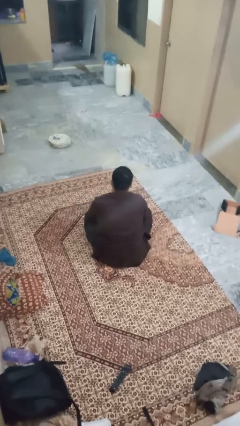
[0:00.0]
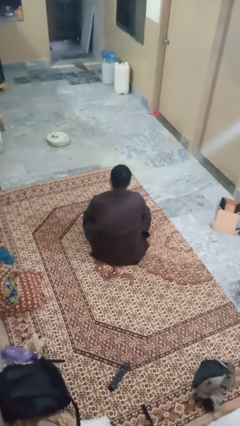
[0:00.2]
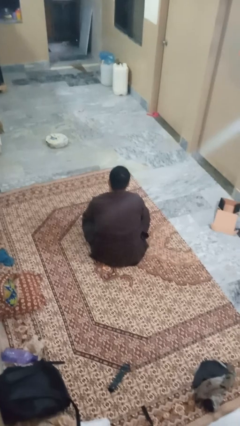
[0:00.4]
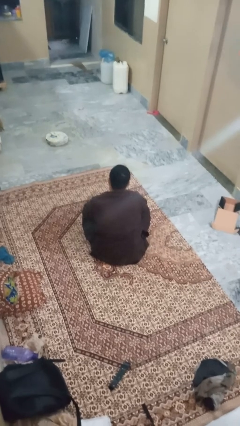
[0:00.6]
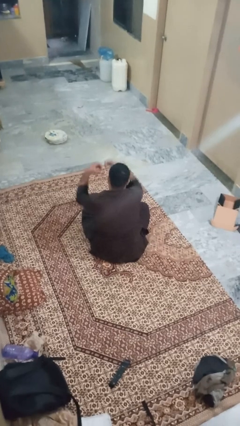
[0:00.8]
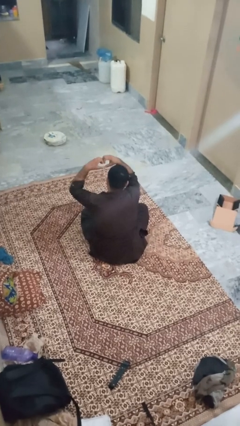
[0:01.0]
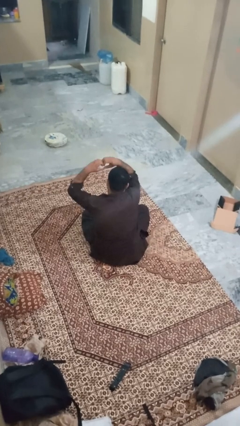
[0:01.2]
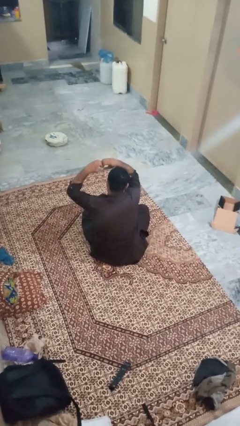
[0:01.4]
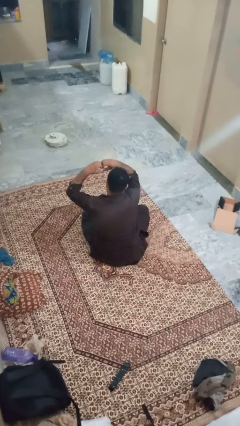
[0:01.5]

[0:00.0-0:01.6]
person gestures heart

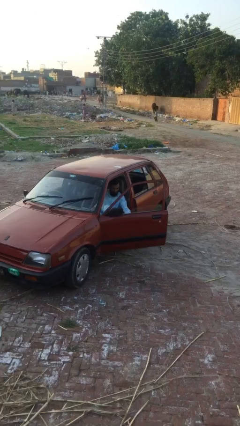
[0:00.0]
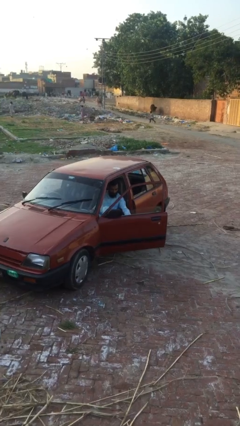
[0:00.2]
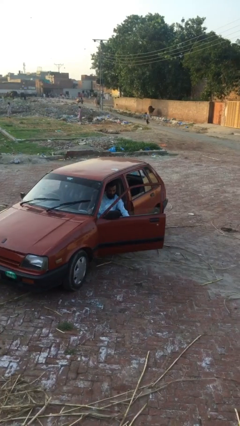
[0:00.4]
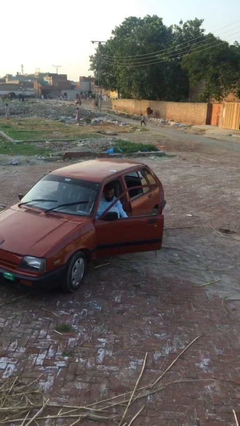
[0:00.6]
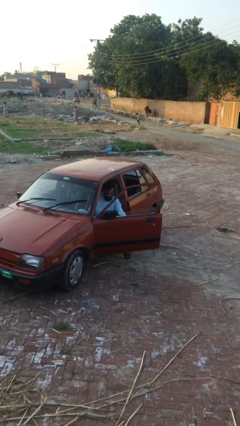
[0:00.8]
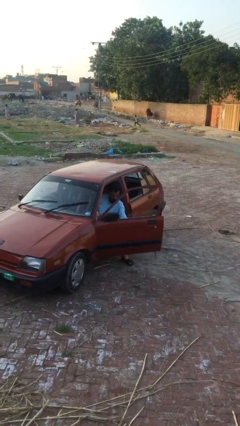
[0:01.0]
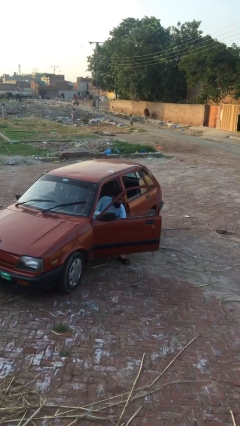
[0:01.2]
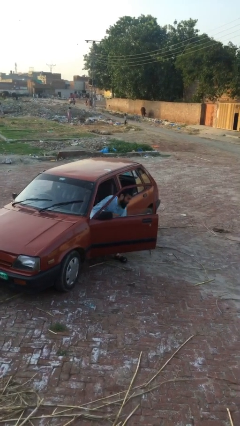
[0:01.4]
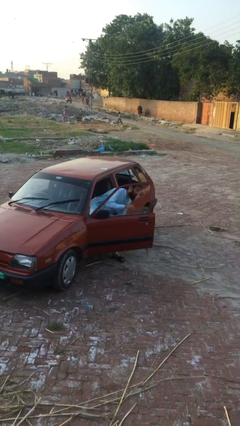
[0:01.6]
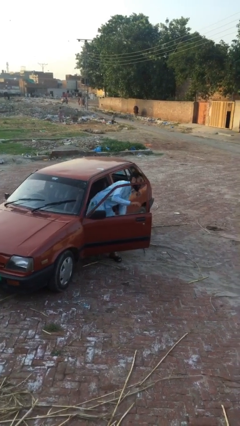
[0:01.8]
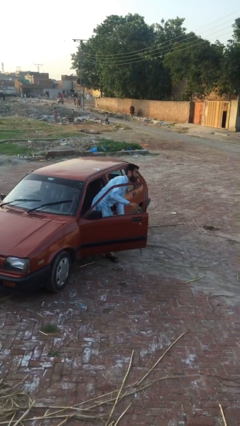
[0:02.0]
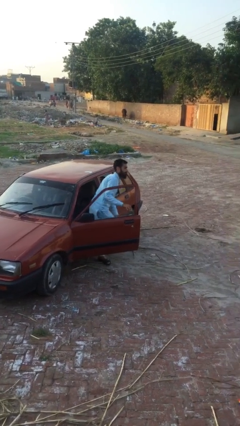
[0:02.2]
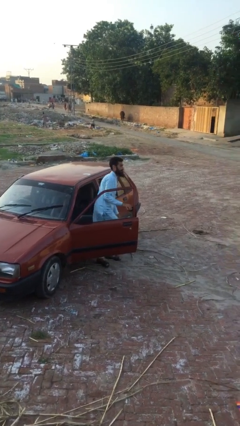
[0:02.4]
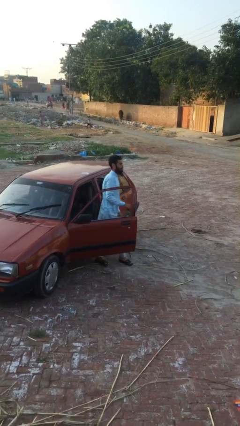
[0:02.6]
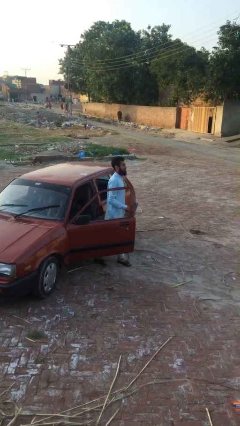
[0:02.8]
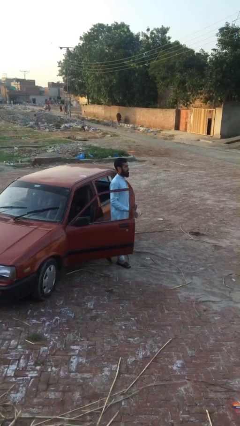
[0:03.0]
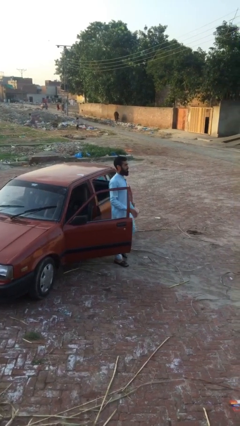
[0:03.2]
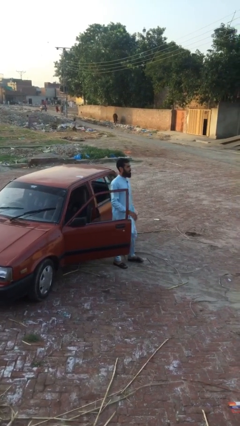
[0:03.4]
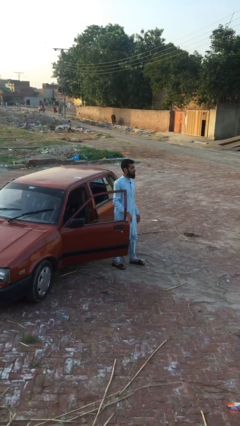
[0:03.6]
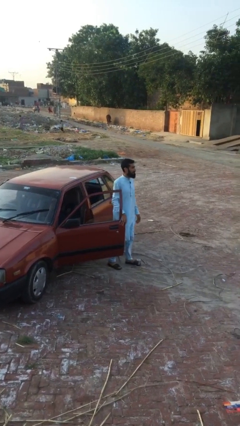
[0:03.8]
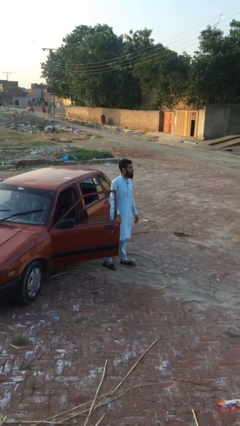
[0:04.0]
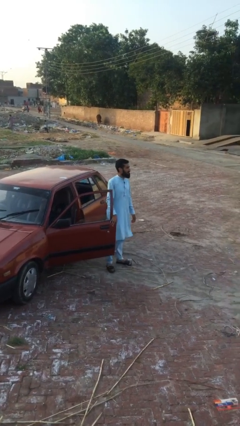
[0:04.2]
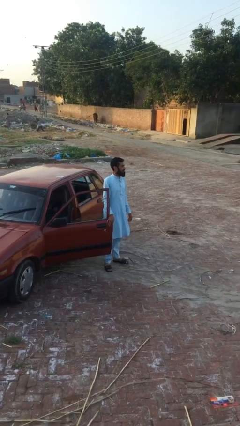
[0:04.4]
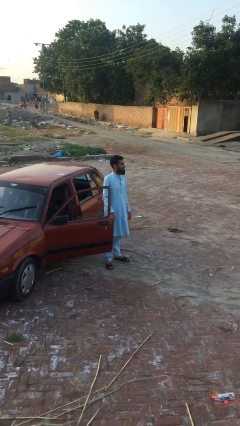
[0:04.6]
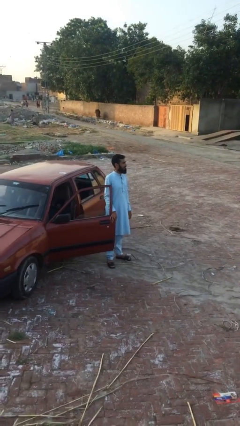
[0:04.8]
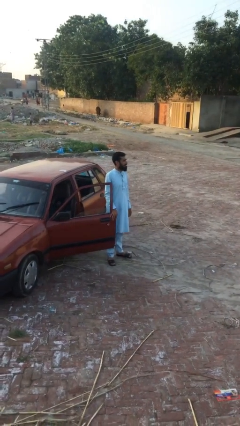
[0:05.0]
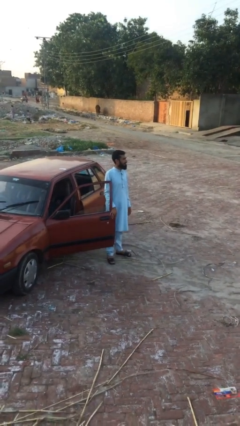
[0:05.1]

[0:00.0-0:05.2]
person exits car

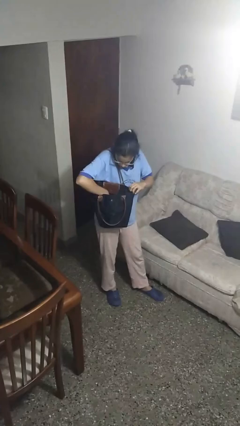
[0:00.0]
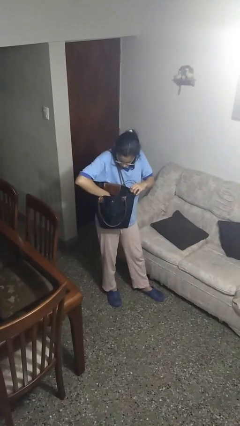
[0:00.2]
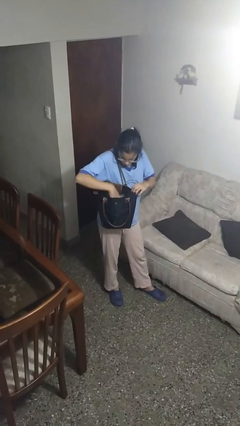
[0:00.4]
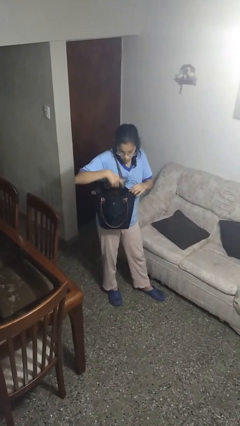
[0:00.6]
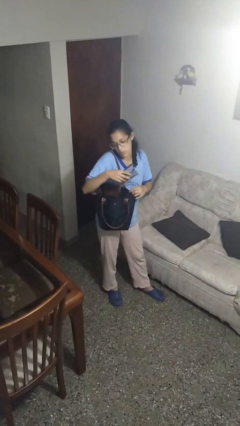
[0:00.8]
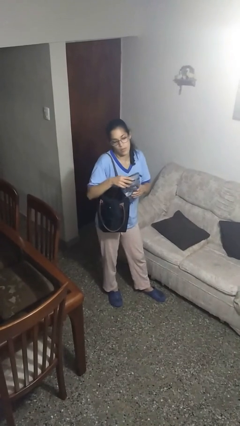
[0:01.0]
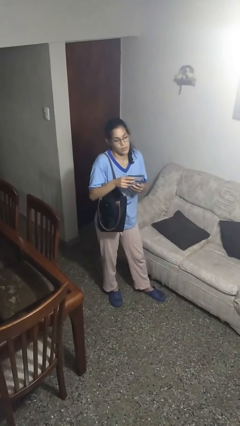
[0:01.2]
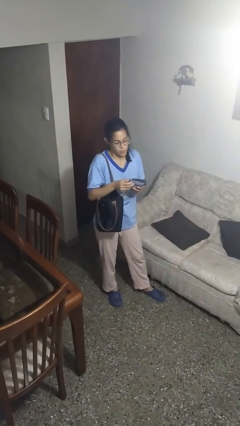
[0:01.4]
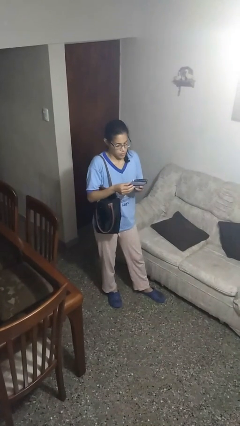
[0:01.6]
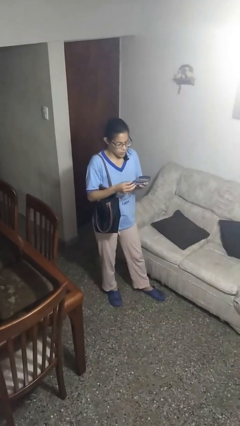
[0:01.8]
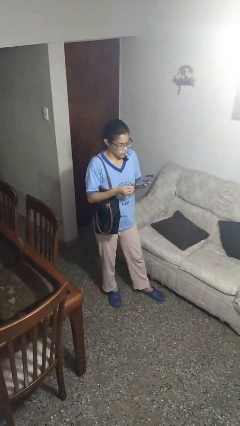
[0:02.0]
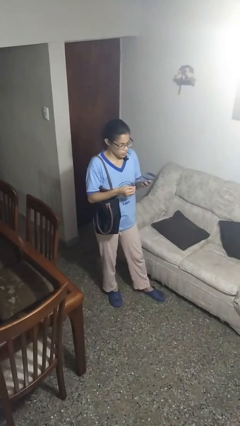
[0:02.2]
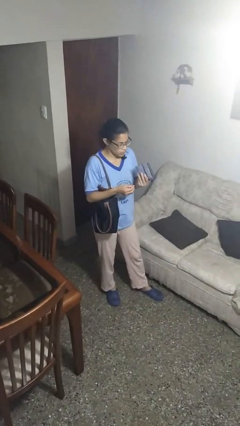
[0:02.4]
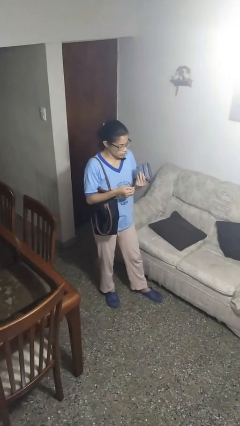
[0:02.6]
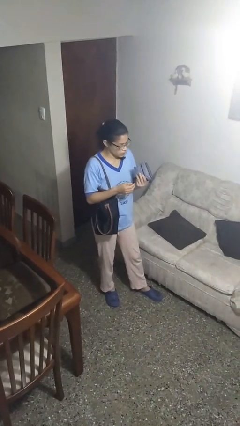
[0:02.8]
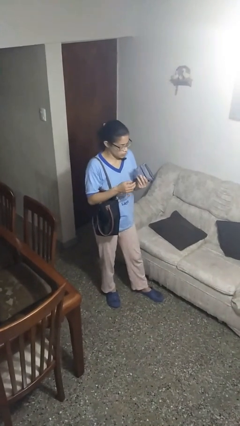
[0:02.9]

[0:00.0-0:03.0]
person takes object from purse

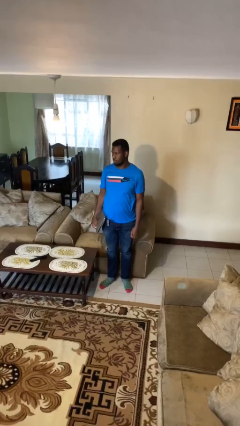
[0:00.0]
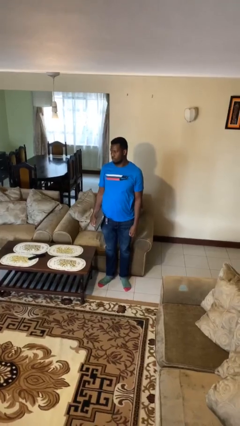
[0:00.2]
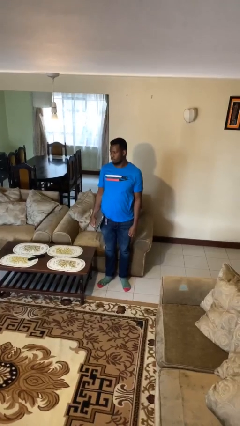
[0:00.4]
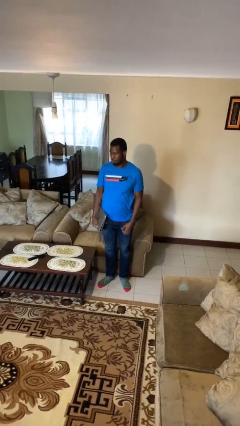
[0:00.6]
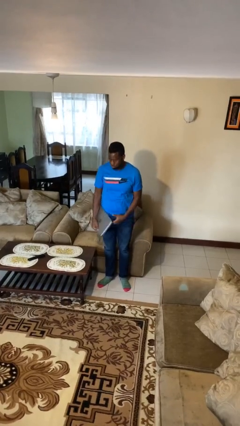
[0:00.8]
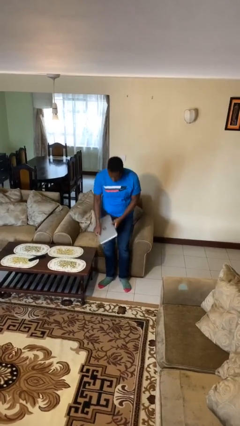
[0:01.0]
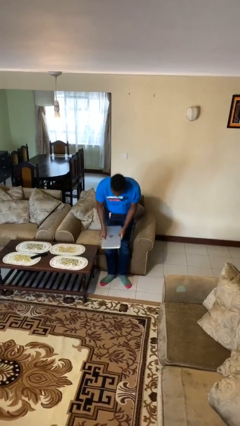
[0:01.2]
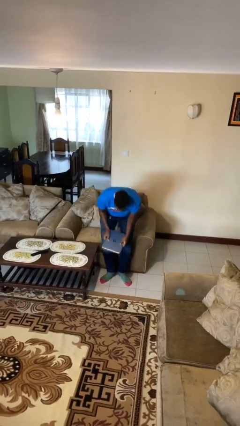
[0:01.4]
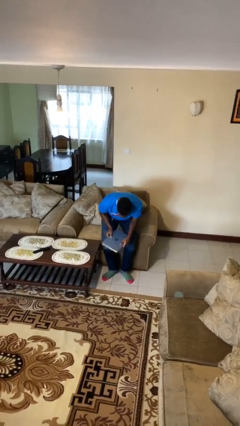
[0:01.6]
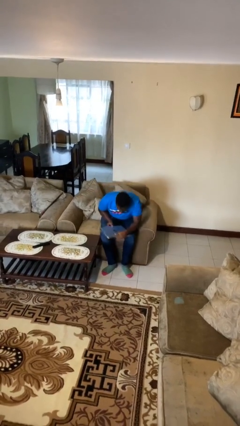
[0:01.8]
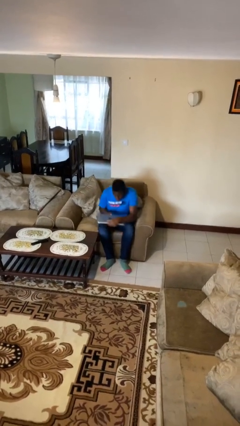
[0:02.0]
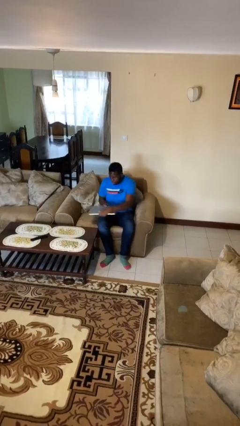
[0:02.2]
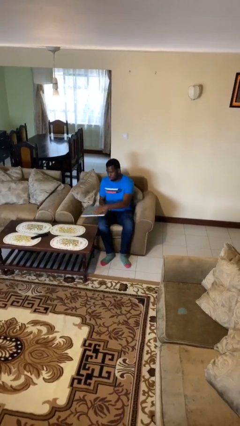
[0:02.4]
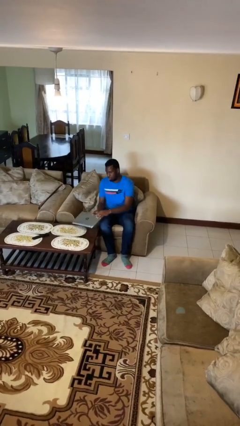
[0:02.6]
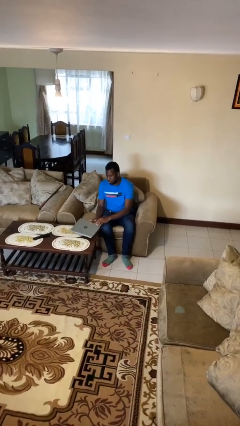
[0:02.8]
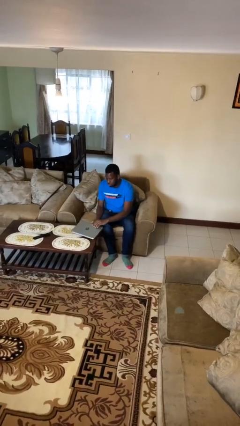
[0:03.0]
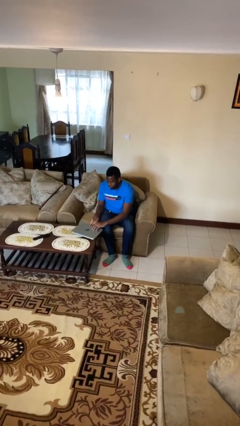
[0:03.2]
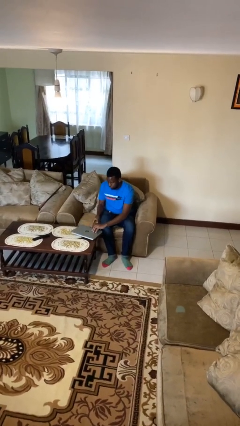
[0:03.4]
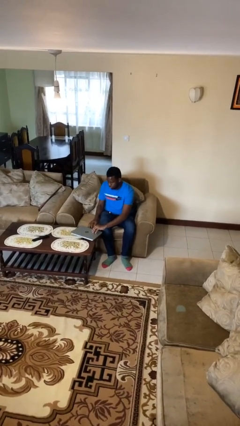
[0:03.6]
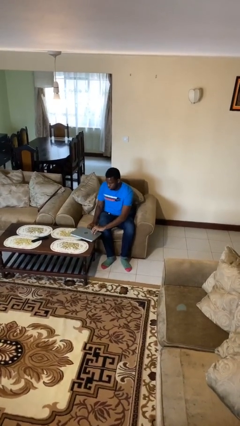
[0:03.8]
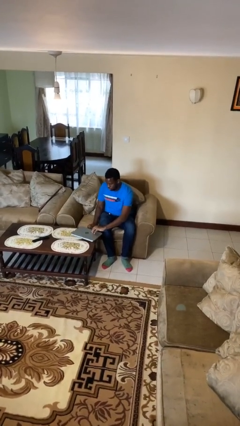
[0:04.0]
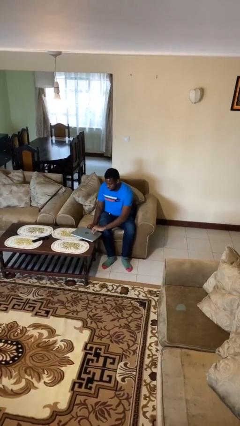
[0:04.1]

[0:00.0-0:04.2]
person sits down

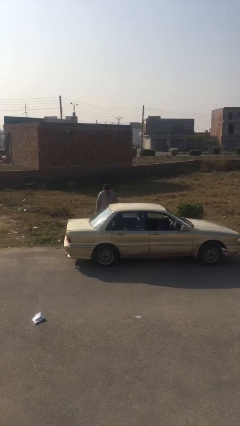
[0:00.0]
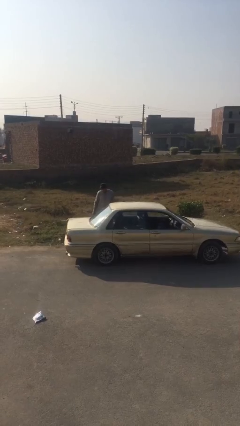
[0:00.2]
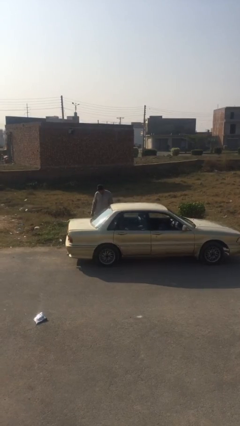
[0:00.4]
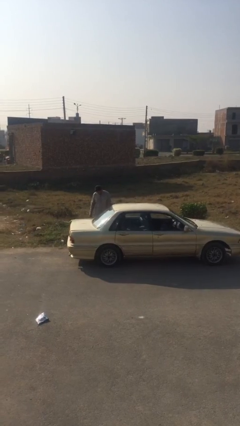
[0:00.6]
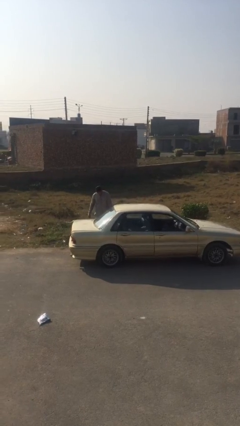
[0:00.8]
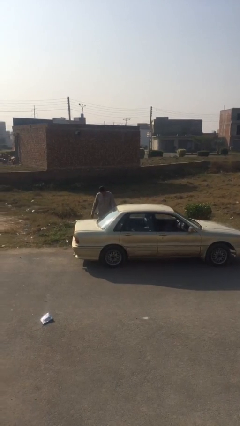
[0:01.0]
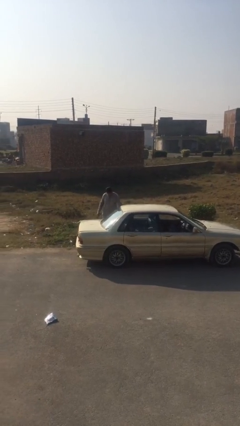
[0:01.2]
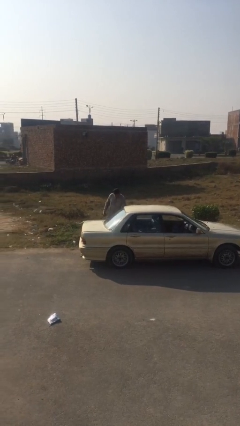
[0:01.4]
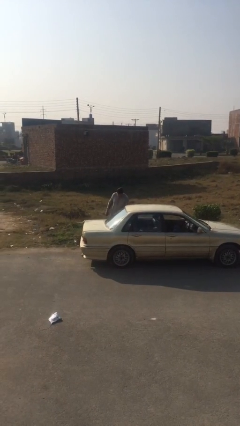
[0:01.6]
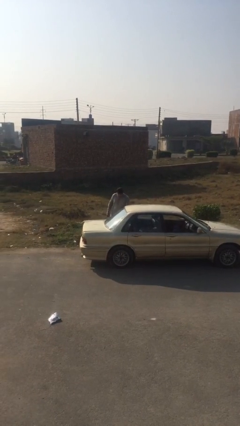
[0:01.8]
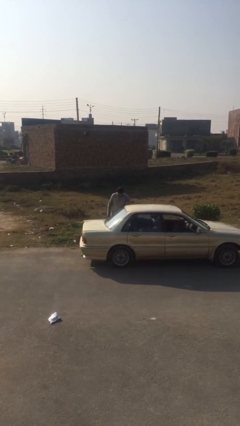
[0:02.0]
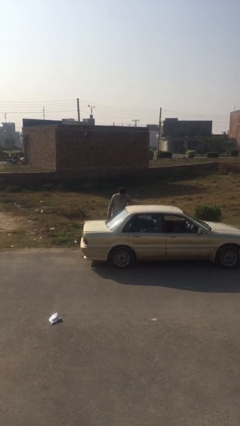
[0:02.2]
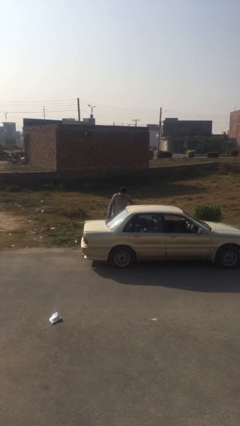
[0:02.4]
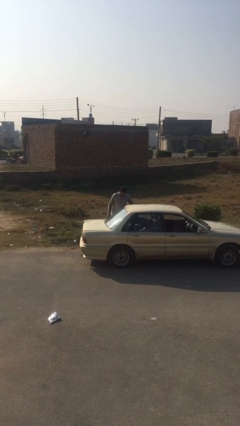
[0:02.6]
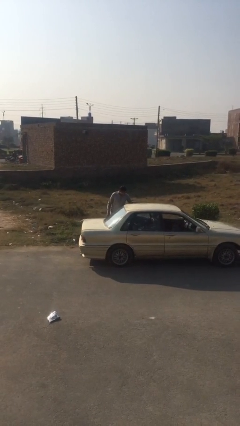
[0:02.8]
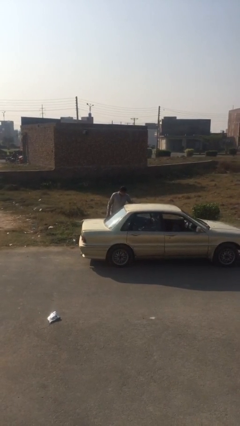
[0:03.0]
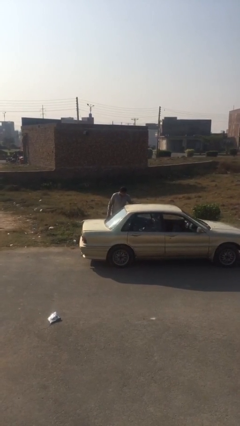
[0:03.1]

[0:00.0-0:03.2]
person opens car door

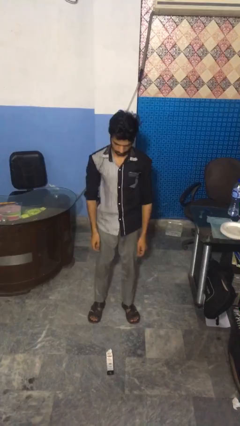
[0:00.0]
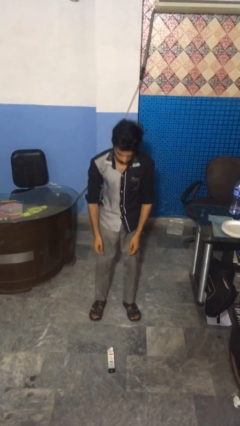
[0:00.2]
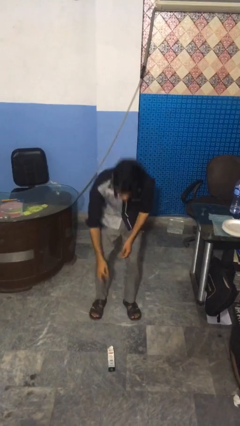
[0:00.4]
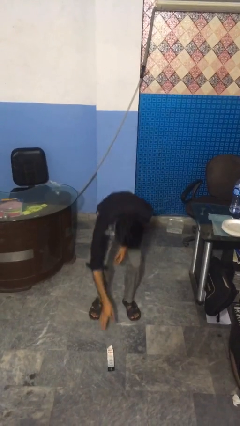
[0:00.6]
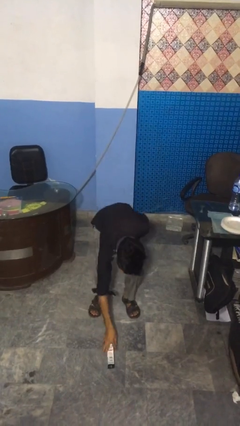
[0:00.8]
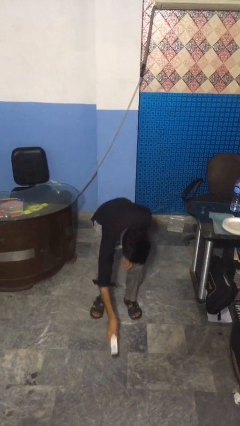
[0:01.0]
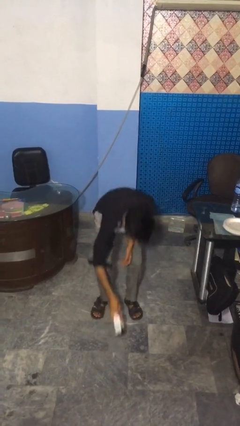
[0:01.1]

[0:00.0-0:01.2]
person picks up object from floor
